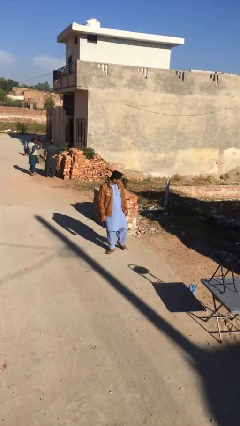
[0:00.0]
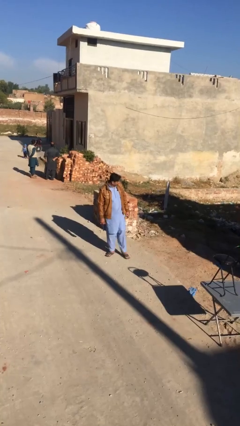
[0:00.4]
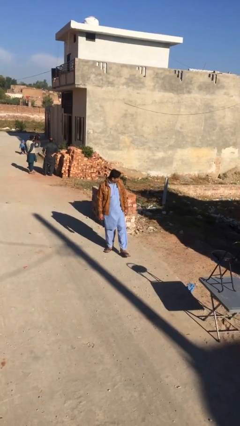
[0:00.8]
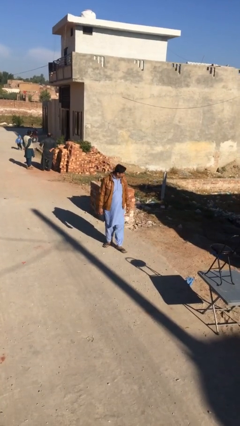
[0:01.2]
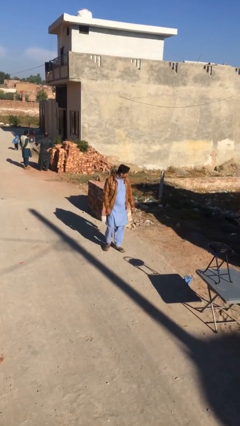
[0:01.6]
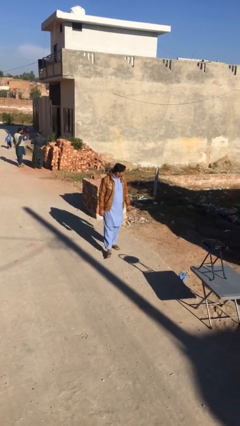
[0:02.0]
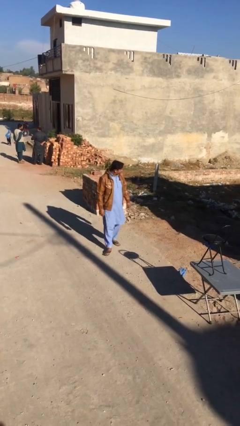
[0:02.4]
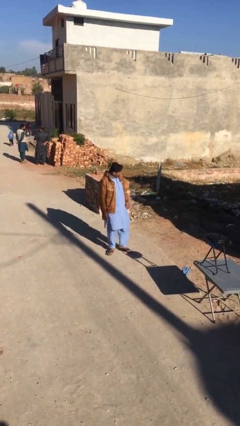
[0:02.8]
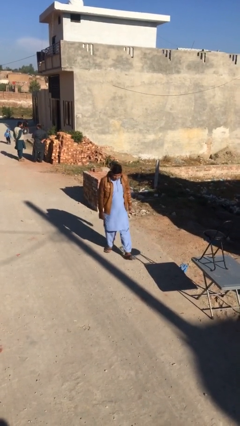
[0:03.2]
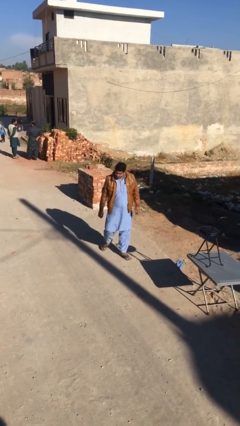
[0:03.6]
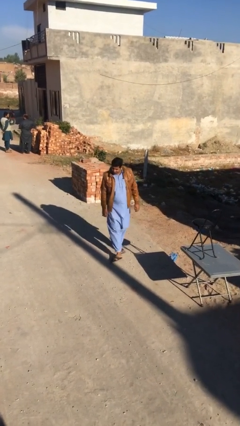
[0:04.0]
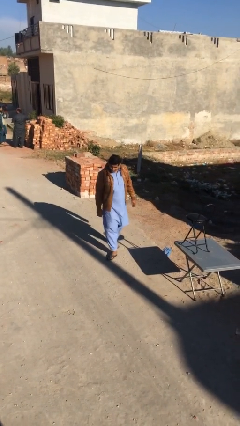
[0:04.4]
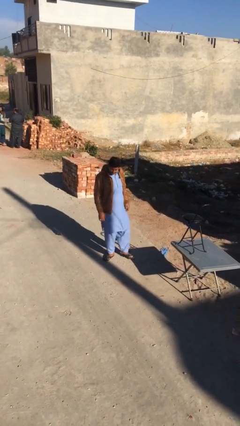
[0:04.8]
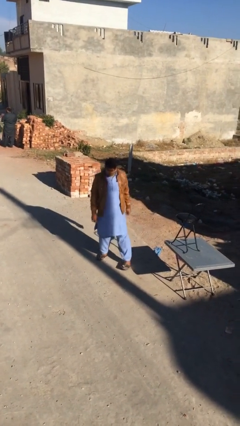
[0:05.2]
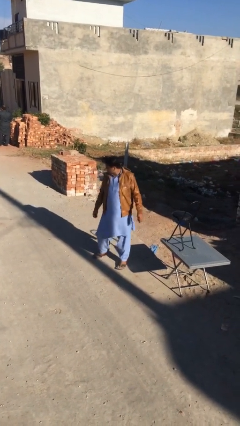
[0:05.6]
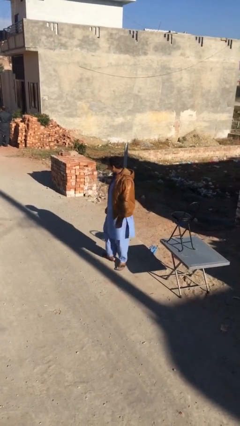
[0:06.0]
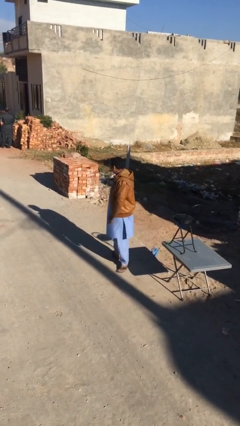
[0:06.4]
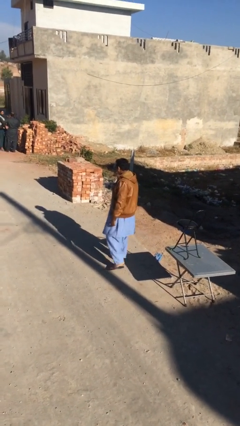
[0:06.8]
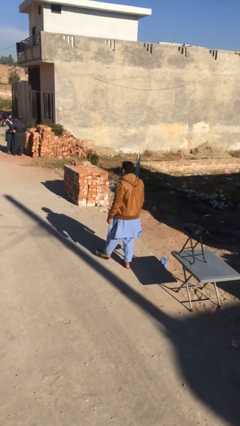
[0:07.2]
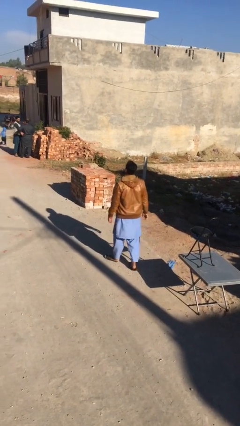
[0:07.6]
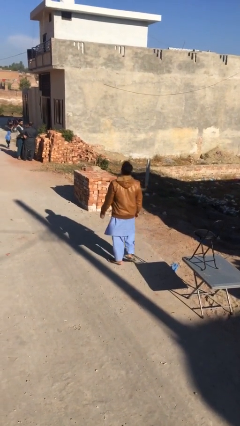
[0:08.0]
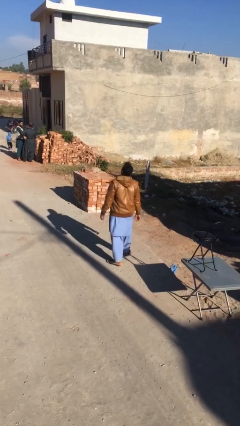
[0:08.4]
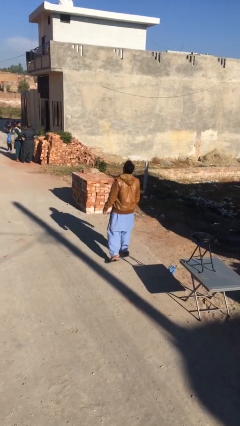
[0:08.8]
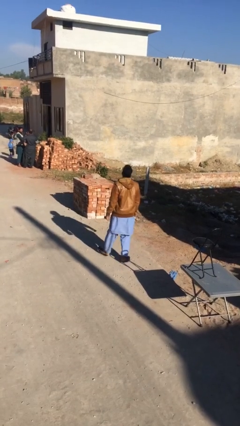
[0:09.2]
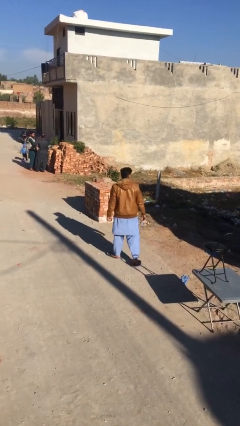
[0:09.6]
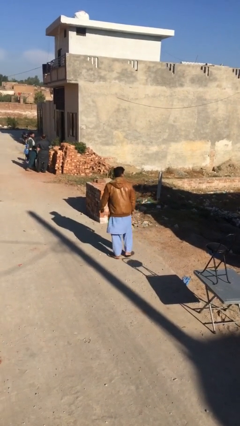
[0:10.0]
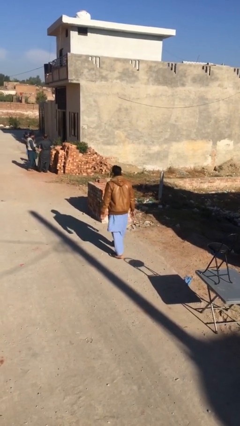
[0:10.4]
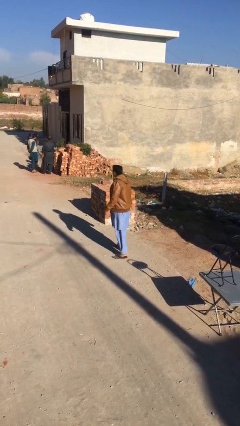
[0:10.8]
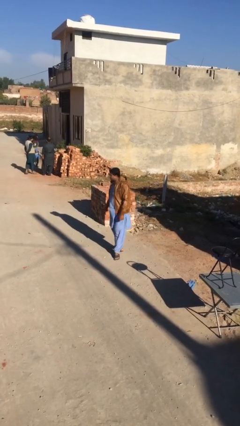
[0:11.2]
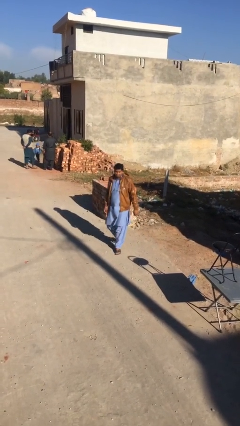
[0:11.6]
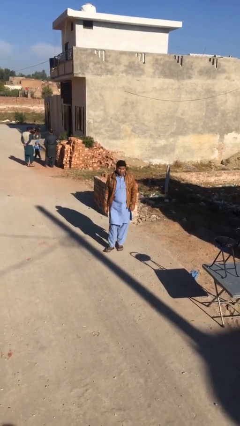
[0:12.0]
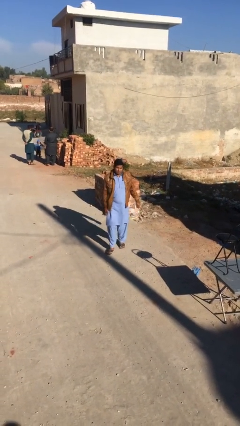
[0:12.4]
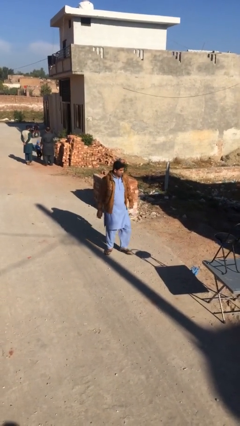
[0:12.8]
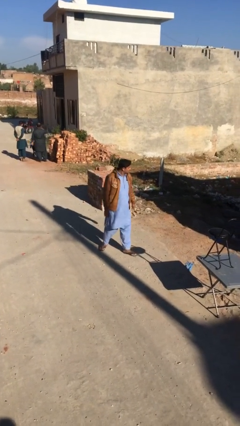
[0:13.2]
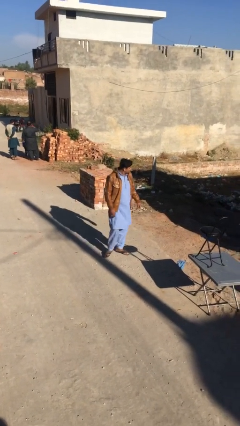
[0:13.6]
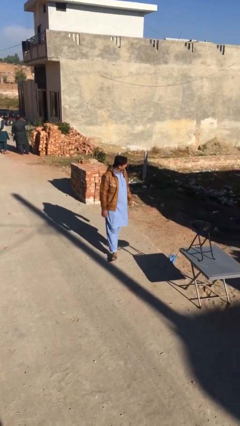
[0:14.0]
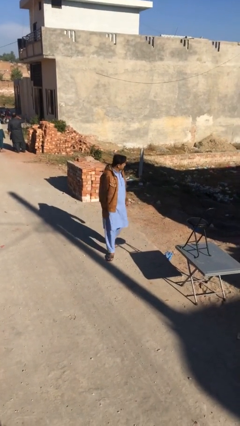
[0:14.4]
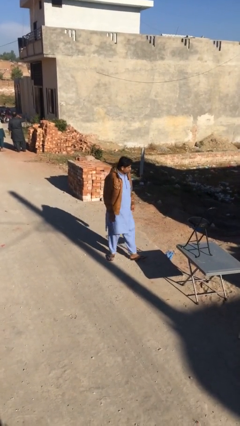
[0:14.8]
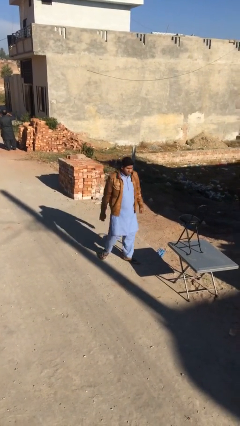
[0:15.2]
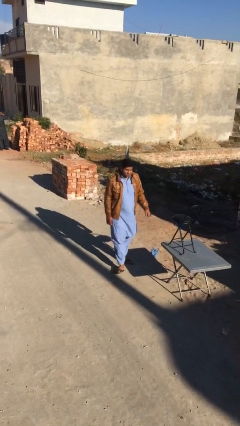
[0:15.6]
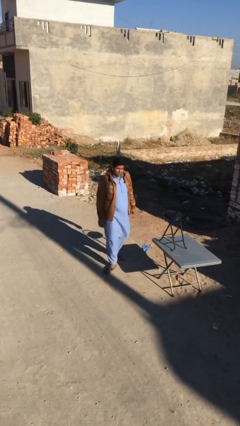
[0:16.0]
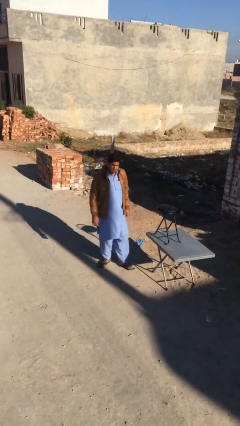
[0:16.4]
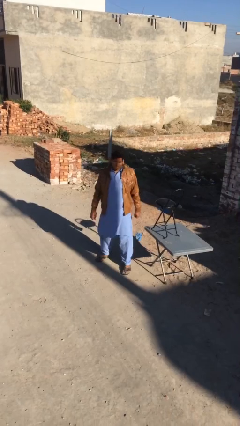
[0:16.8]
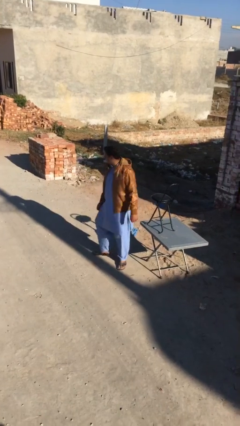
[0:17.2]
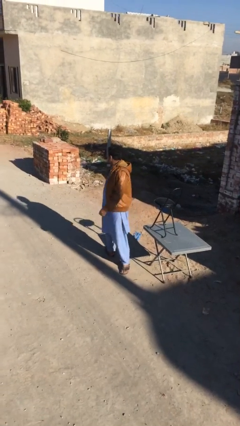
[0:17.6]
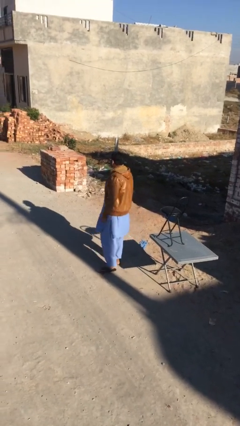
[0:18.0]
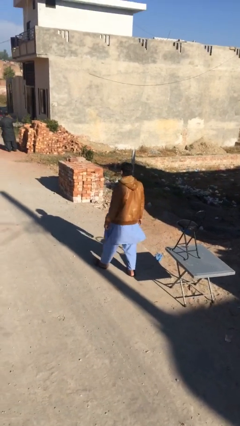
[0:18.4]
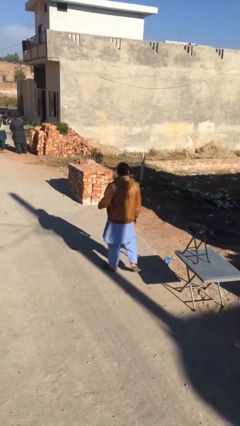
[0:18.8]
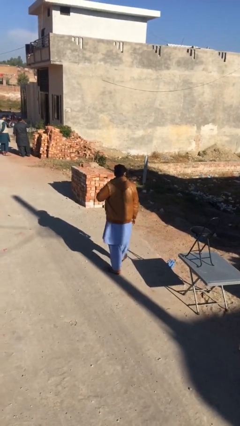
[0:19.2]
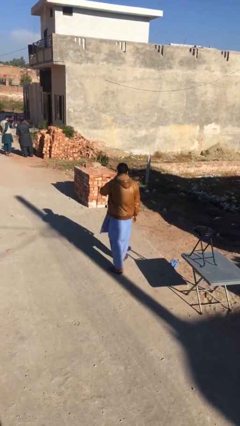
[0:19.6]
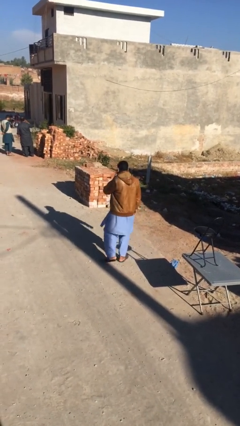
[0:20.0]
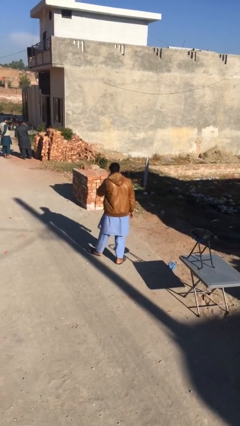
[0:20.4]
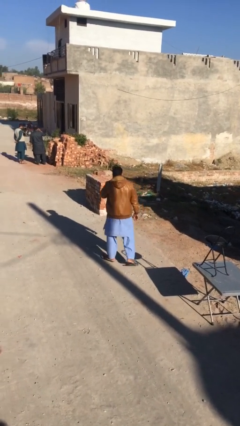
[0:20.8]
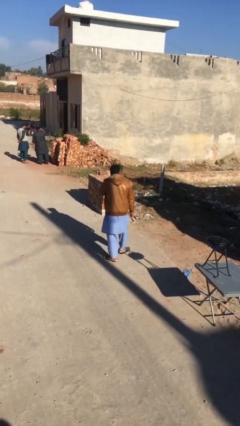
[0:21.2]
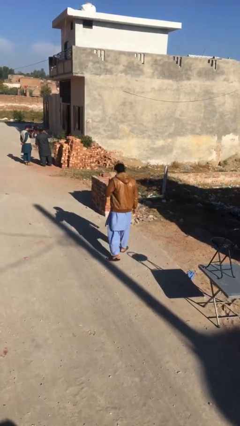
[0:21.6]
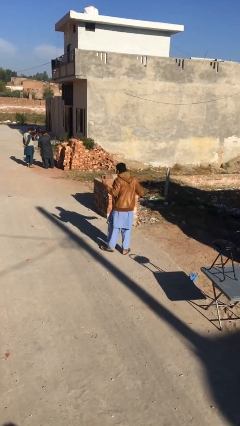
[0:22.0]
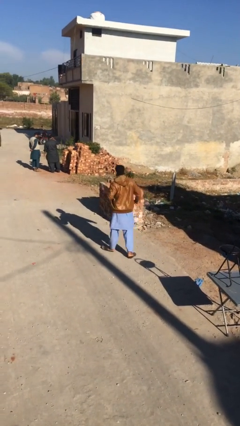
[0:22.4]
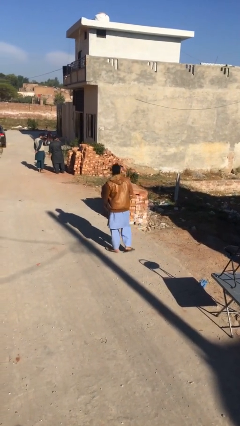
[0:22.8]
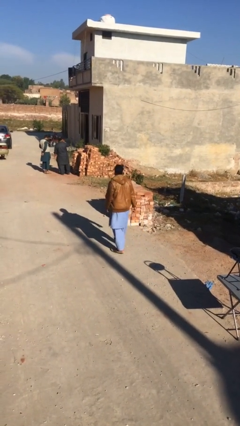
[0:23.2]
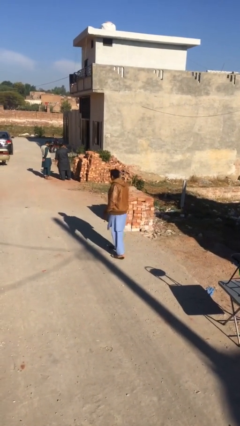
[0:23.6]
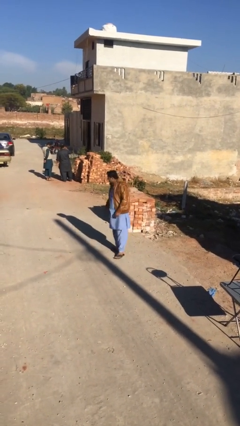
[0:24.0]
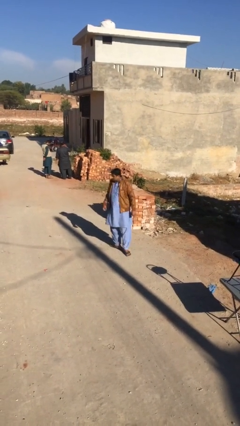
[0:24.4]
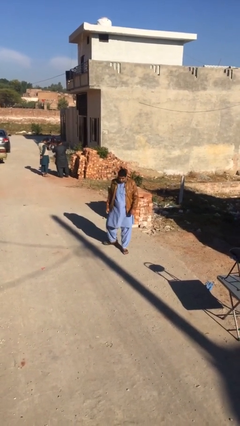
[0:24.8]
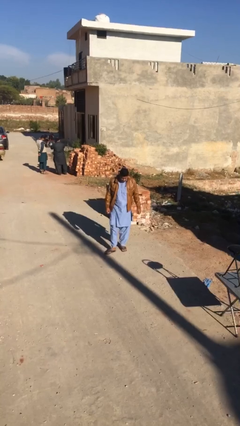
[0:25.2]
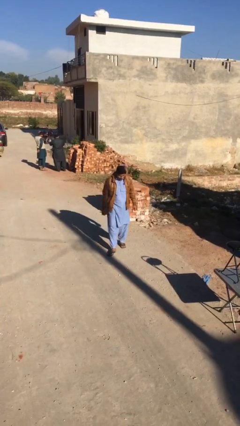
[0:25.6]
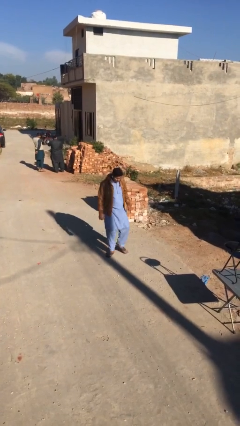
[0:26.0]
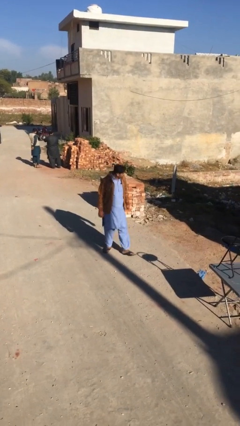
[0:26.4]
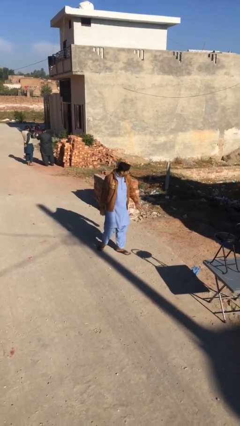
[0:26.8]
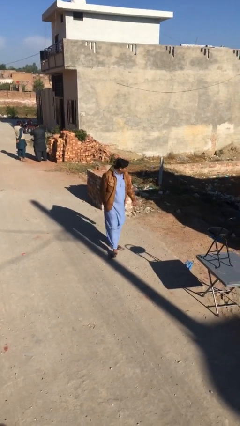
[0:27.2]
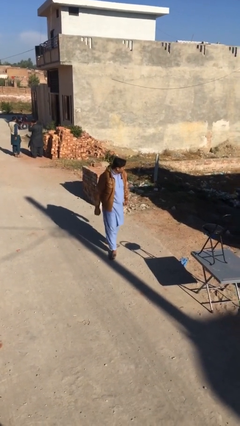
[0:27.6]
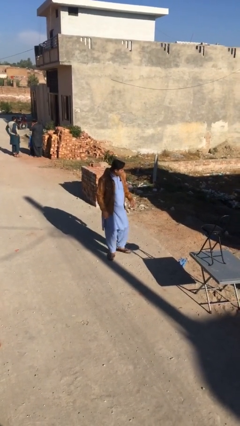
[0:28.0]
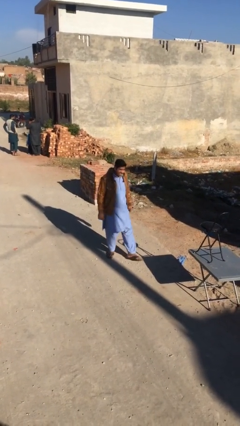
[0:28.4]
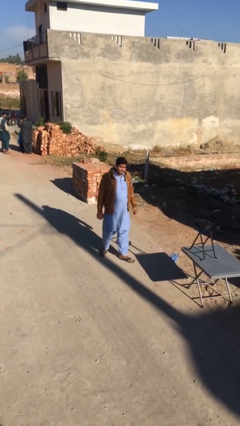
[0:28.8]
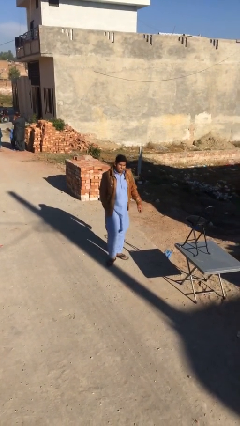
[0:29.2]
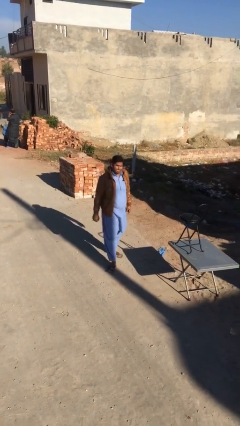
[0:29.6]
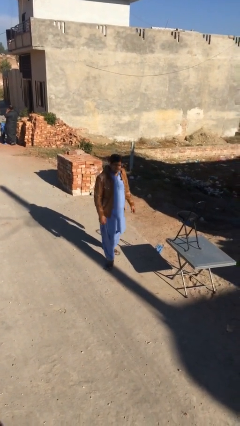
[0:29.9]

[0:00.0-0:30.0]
person walks

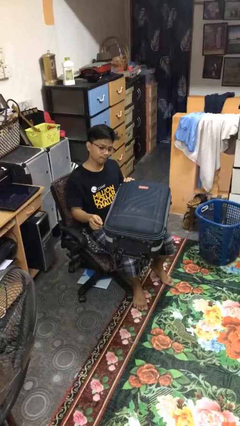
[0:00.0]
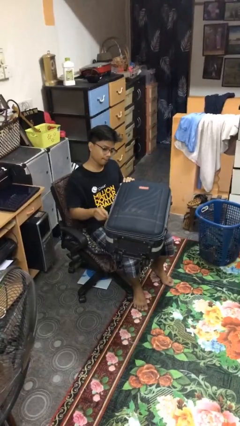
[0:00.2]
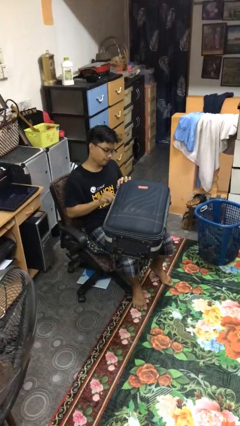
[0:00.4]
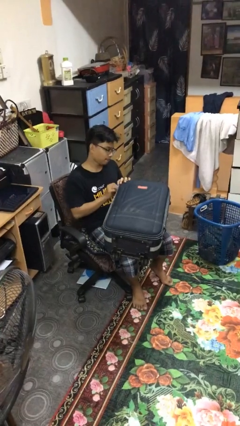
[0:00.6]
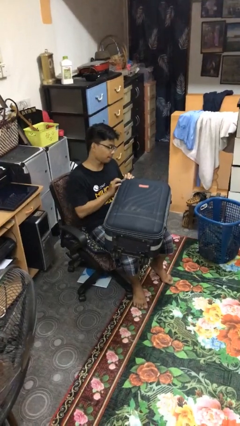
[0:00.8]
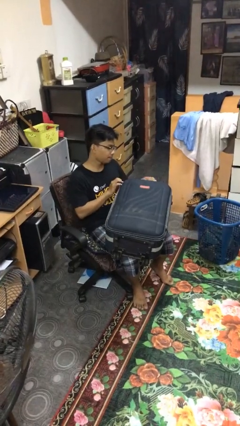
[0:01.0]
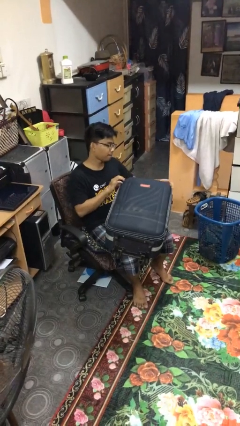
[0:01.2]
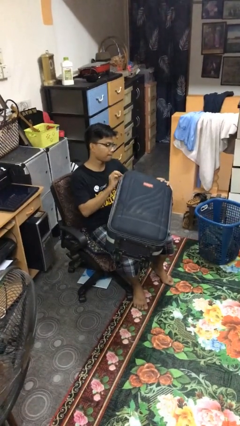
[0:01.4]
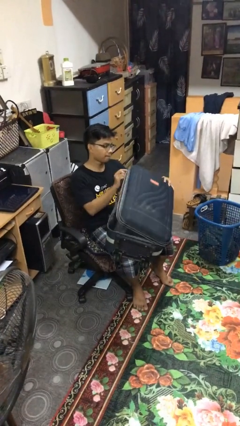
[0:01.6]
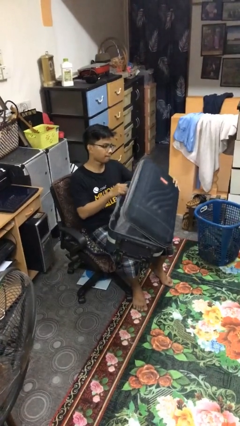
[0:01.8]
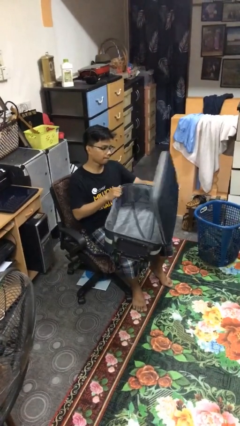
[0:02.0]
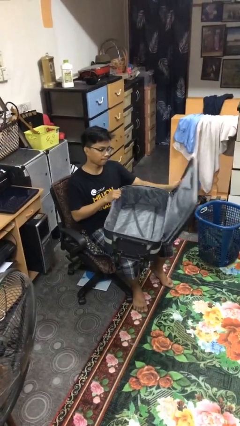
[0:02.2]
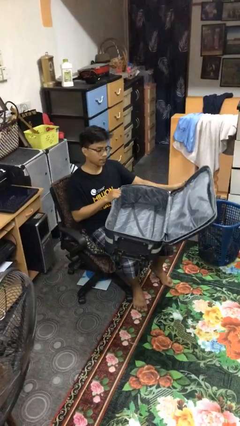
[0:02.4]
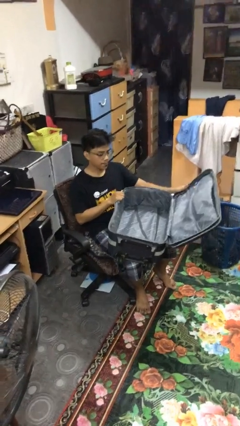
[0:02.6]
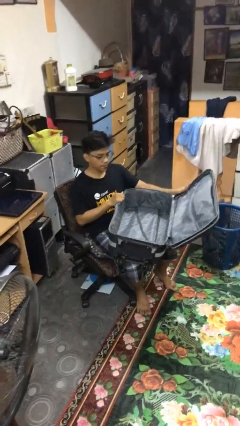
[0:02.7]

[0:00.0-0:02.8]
person opens suitcase
